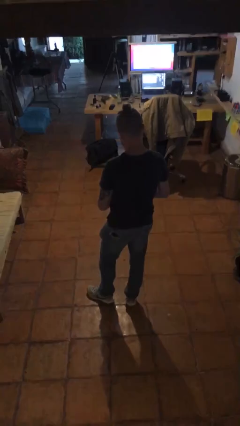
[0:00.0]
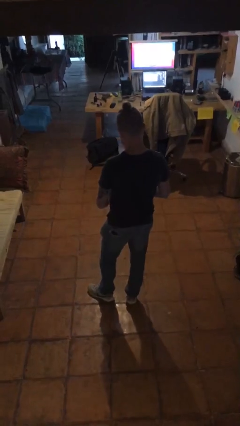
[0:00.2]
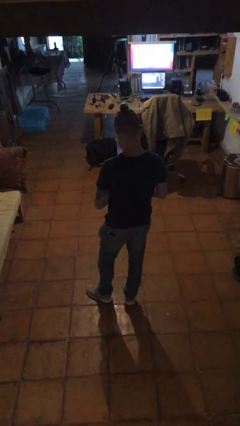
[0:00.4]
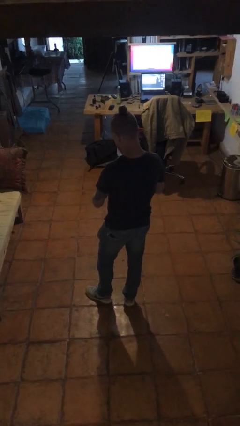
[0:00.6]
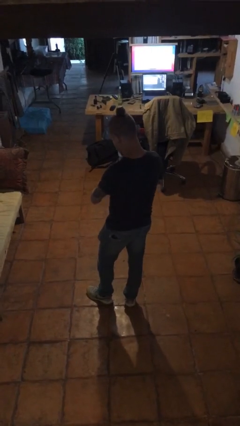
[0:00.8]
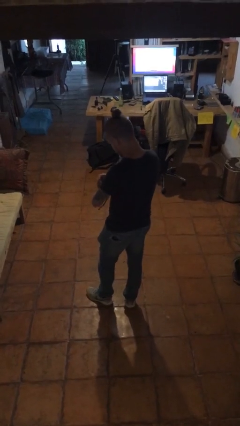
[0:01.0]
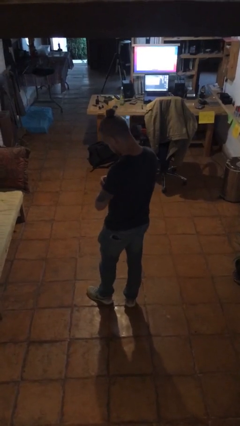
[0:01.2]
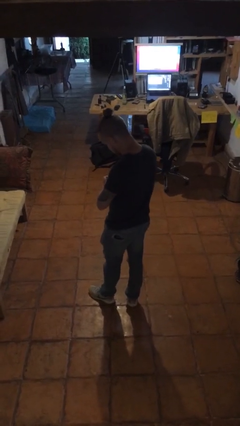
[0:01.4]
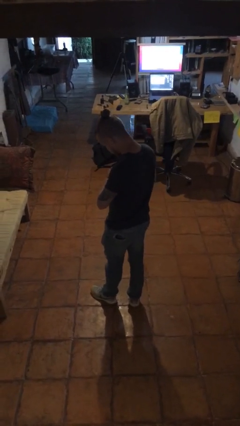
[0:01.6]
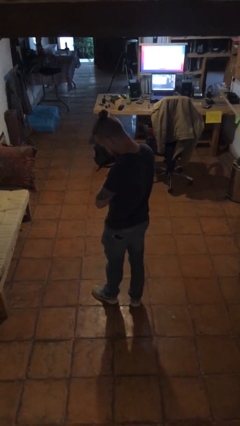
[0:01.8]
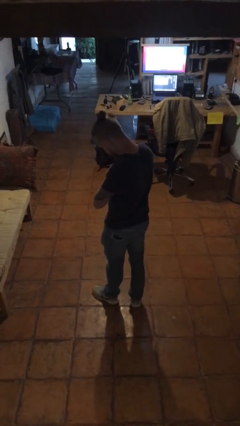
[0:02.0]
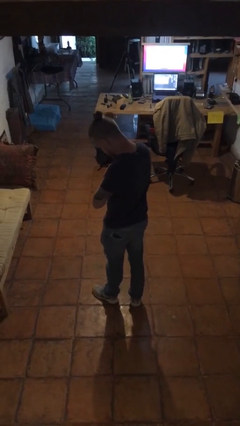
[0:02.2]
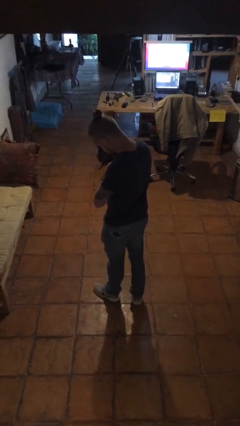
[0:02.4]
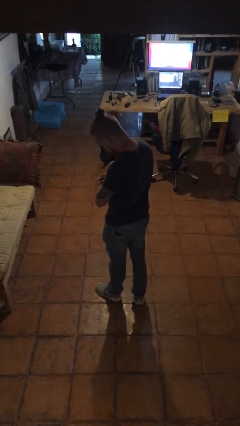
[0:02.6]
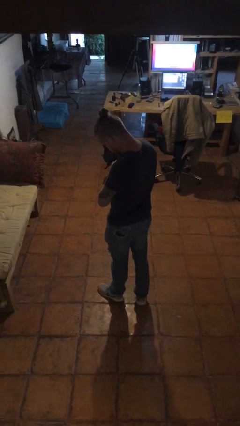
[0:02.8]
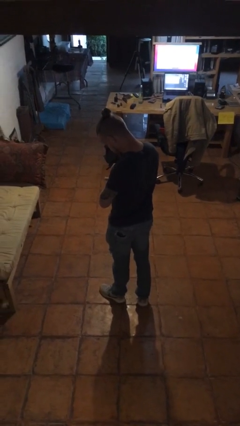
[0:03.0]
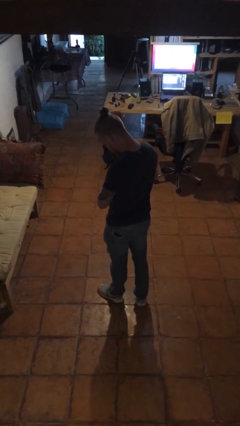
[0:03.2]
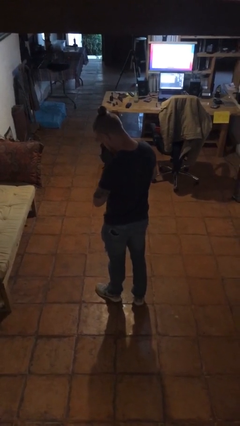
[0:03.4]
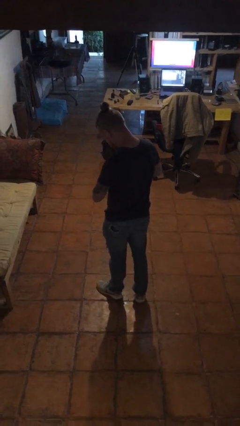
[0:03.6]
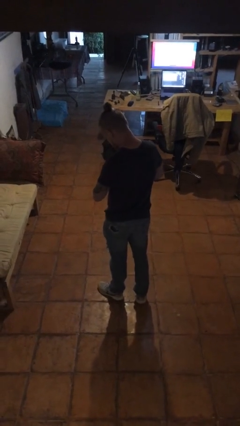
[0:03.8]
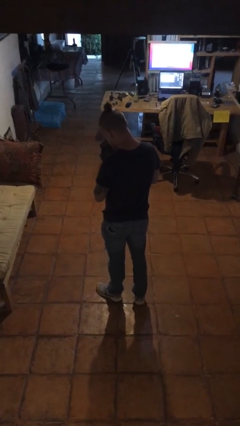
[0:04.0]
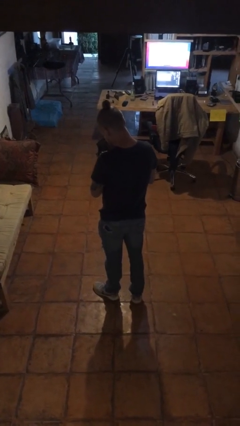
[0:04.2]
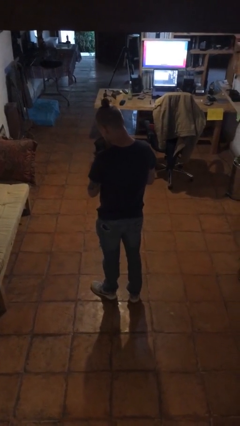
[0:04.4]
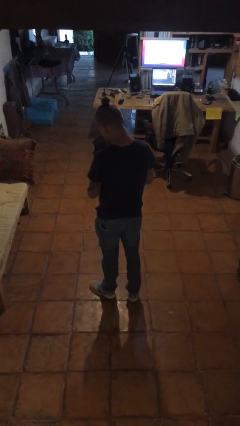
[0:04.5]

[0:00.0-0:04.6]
person puts on wristwatch

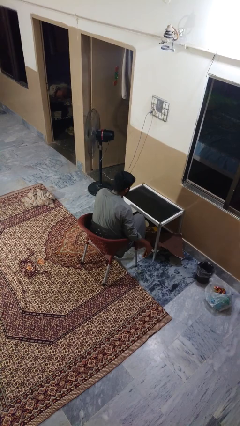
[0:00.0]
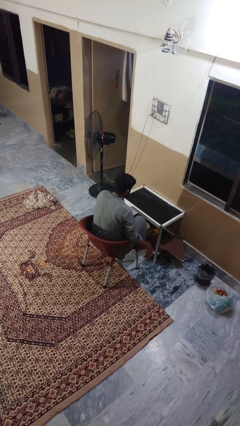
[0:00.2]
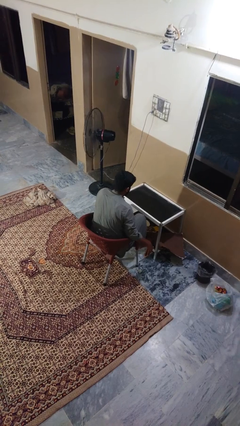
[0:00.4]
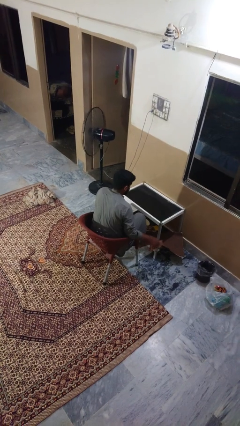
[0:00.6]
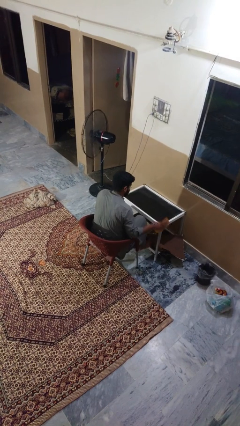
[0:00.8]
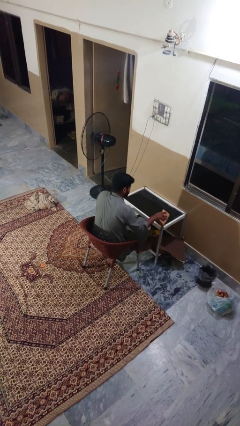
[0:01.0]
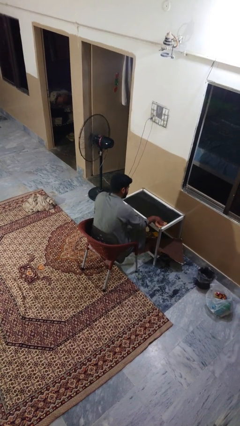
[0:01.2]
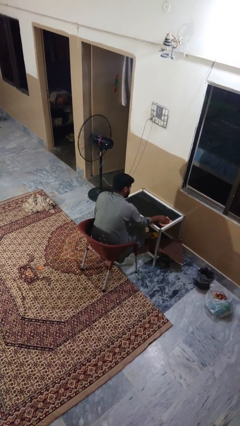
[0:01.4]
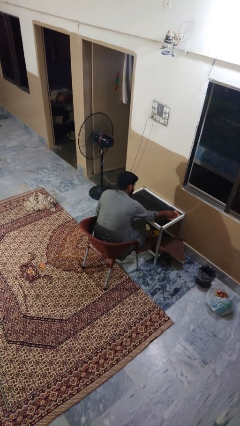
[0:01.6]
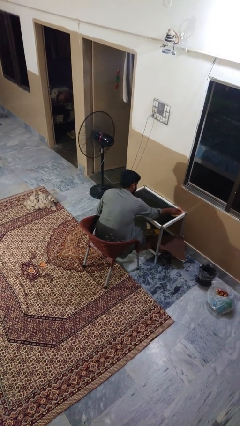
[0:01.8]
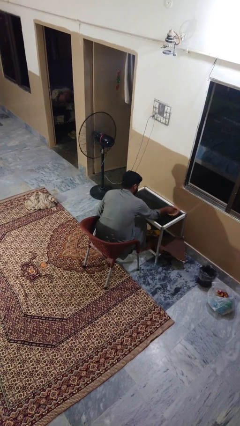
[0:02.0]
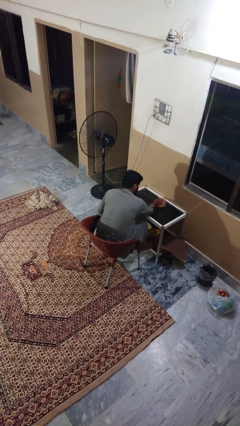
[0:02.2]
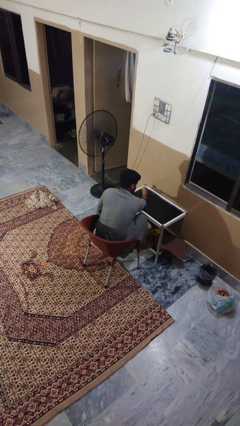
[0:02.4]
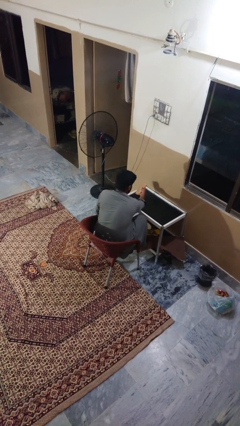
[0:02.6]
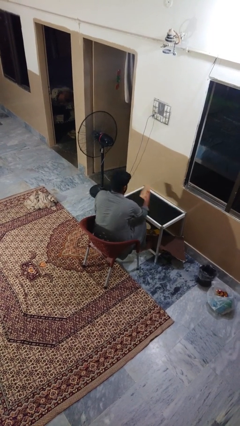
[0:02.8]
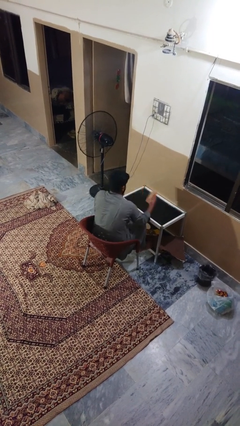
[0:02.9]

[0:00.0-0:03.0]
person cleans table with rag

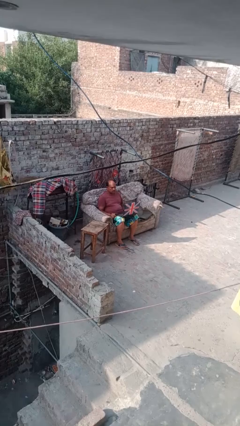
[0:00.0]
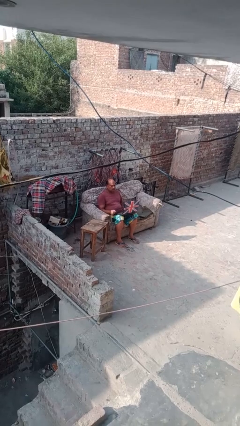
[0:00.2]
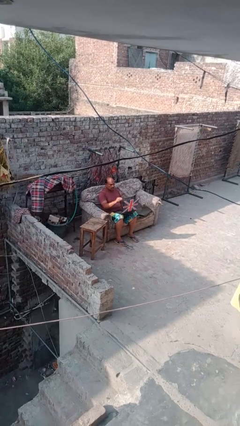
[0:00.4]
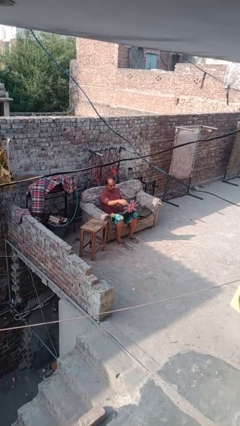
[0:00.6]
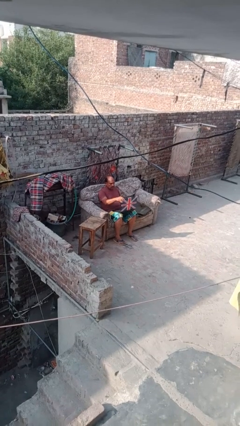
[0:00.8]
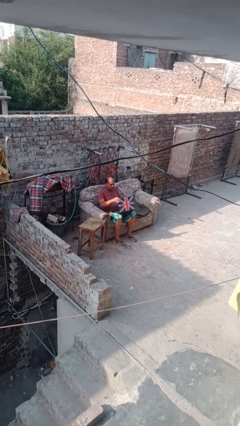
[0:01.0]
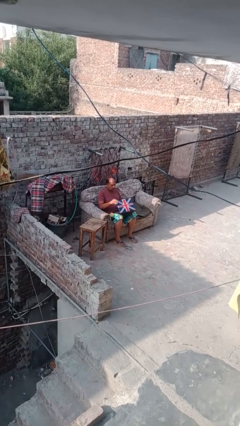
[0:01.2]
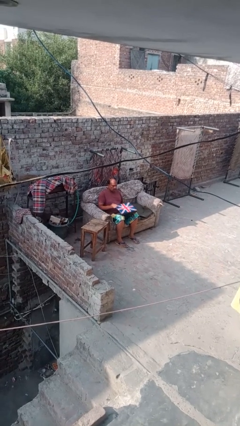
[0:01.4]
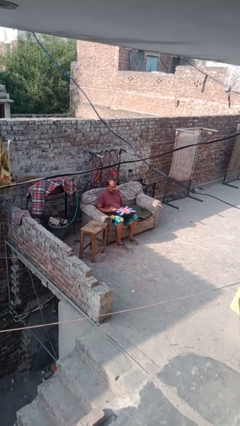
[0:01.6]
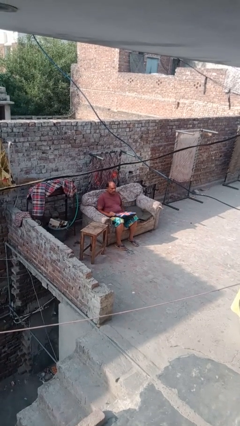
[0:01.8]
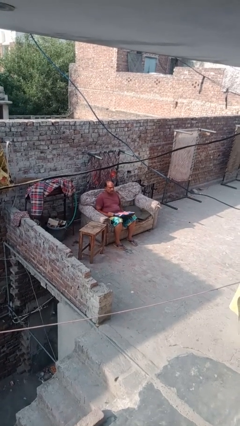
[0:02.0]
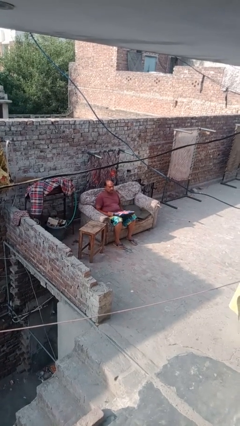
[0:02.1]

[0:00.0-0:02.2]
person closes laptop

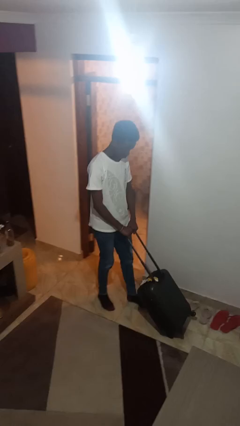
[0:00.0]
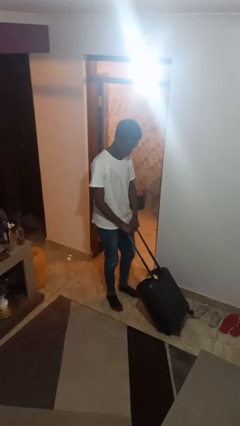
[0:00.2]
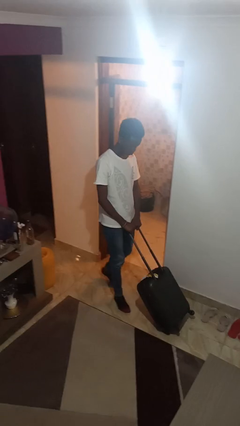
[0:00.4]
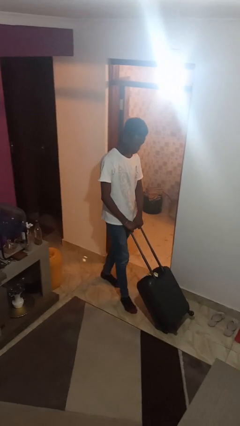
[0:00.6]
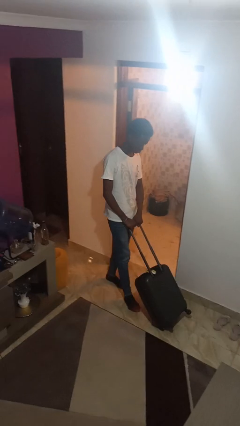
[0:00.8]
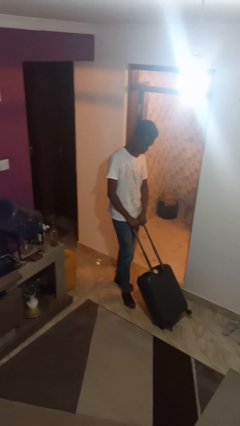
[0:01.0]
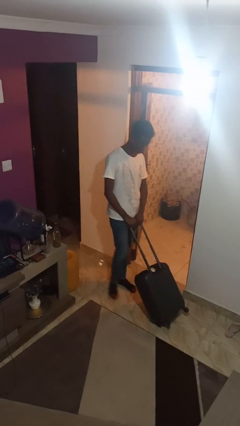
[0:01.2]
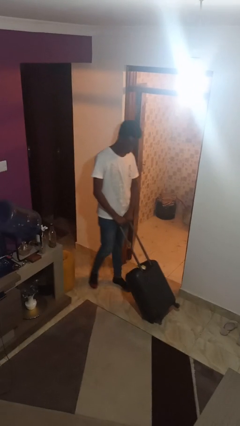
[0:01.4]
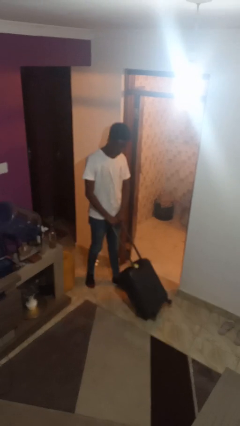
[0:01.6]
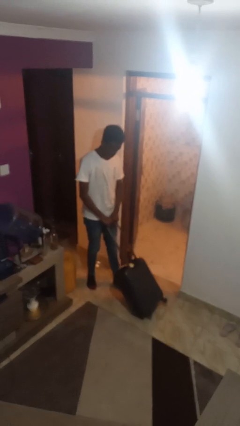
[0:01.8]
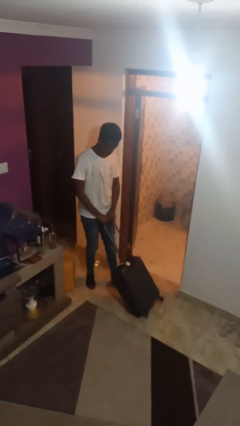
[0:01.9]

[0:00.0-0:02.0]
person pulls wheeled cart

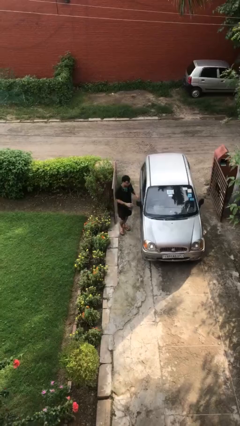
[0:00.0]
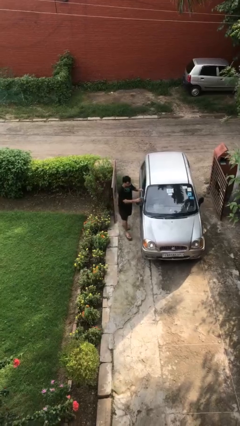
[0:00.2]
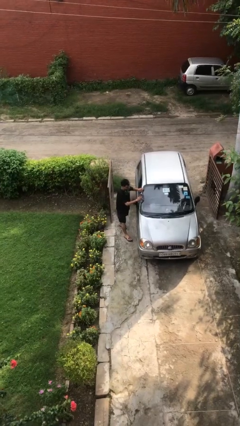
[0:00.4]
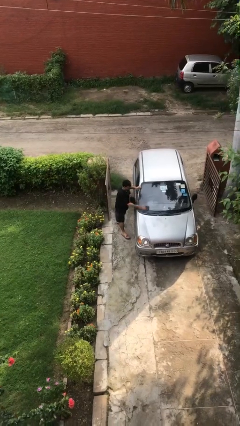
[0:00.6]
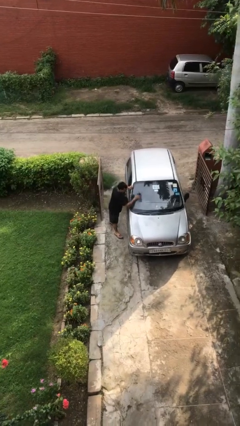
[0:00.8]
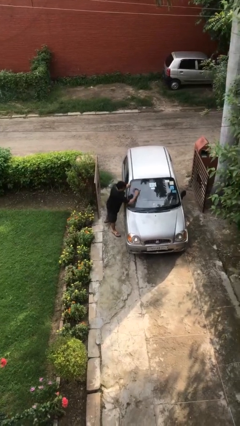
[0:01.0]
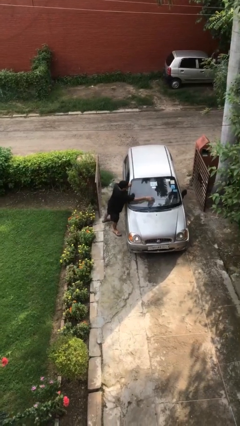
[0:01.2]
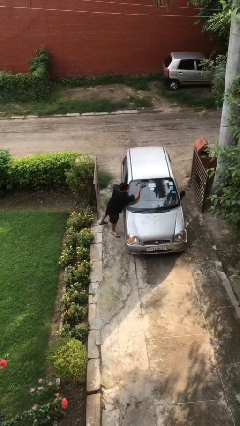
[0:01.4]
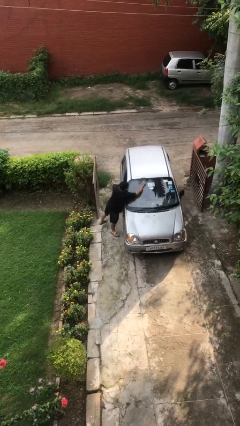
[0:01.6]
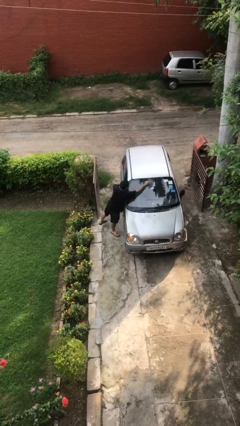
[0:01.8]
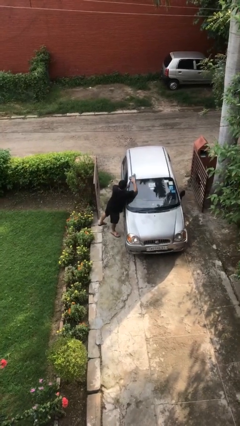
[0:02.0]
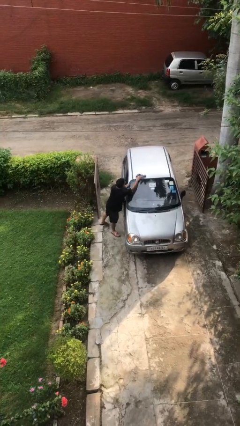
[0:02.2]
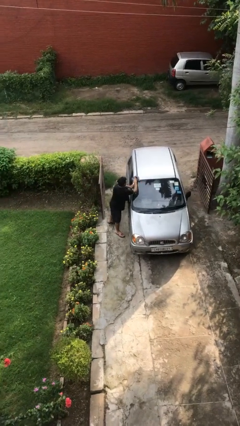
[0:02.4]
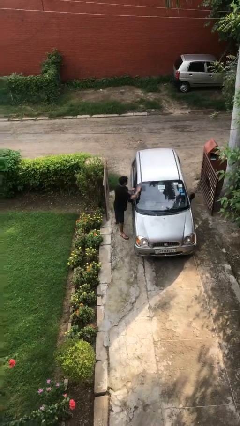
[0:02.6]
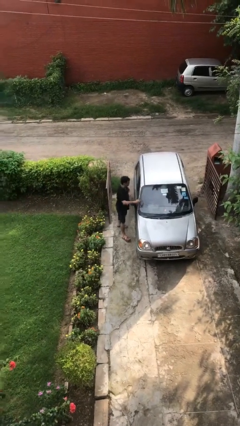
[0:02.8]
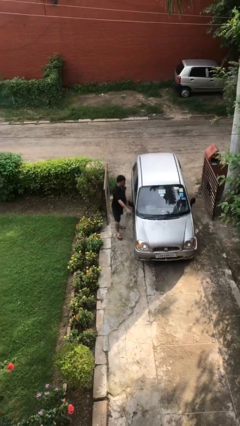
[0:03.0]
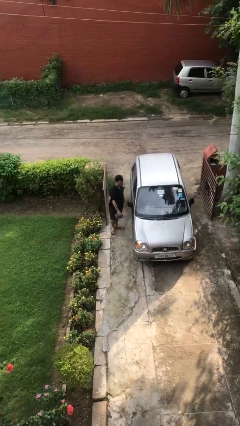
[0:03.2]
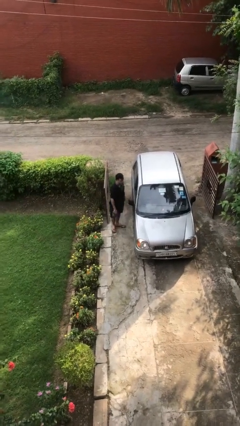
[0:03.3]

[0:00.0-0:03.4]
person polishes car with rag

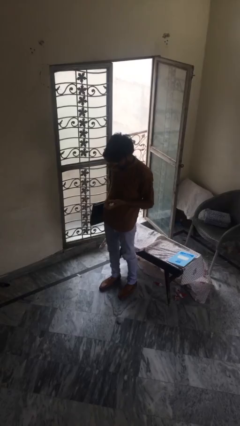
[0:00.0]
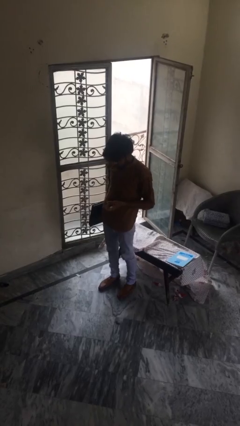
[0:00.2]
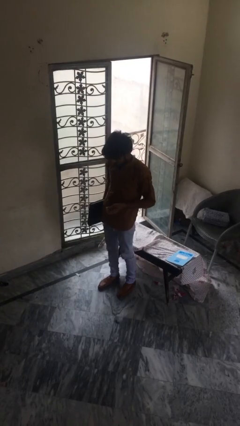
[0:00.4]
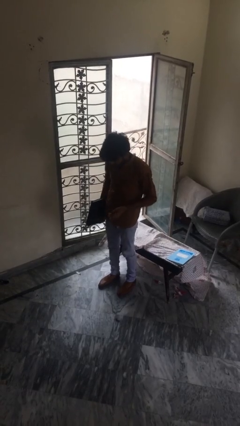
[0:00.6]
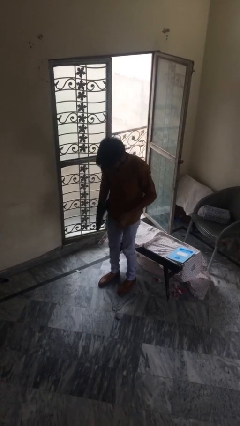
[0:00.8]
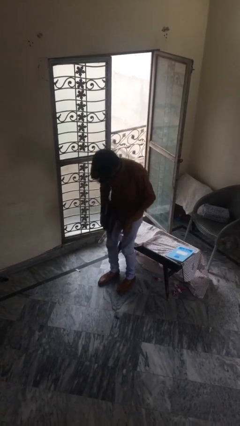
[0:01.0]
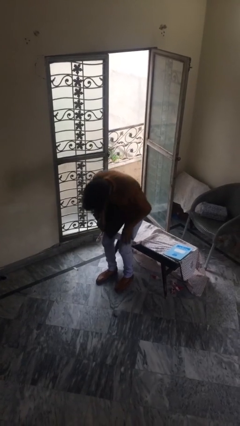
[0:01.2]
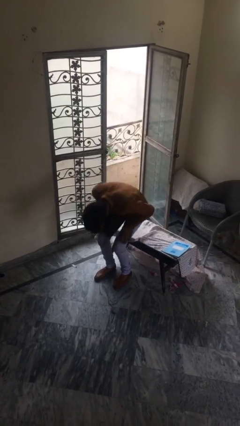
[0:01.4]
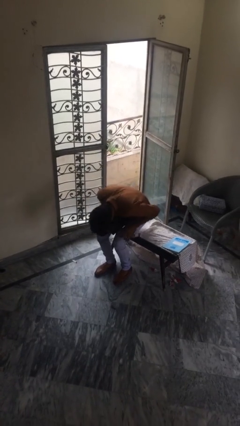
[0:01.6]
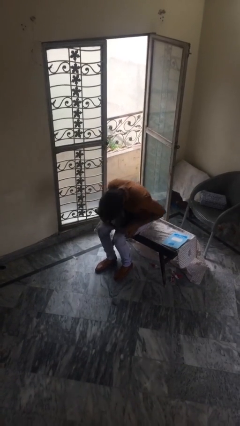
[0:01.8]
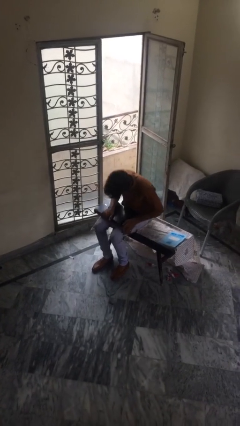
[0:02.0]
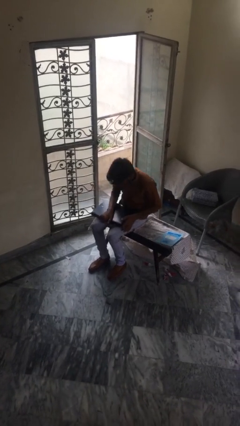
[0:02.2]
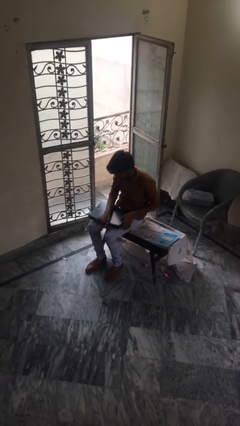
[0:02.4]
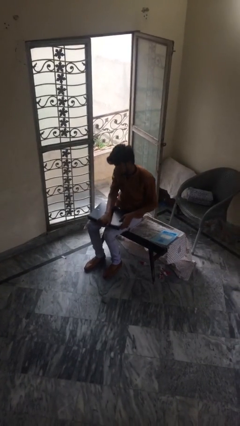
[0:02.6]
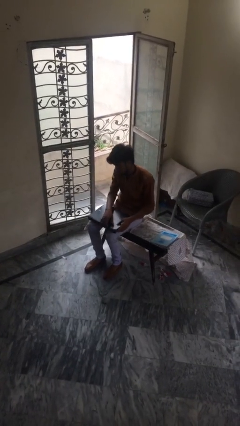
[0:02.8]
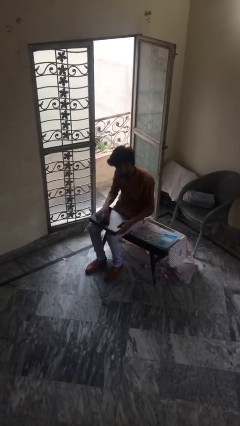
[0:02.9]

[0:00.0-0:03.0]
person sits down
